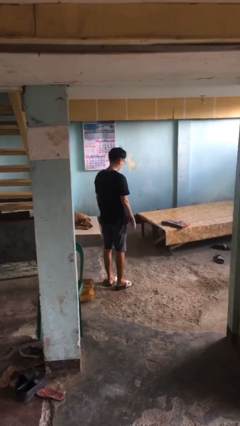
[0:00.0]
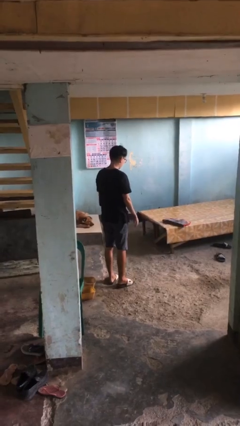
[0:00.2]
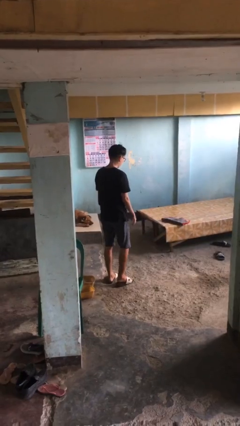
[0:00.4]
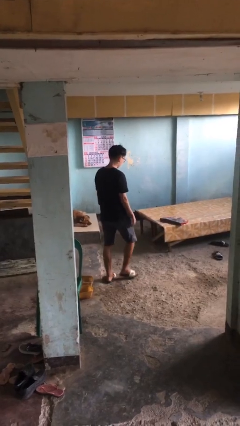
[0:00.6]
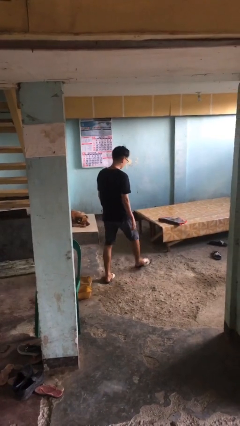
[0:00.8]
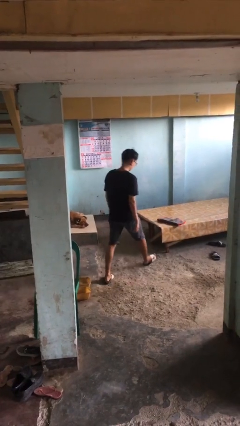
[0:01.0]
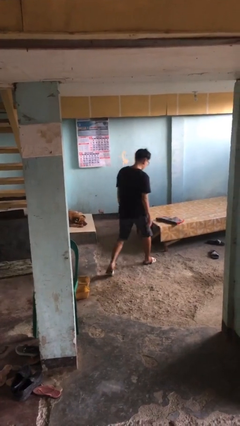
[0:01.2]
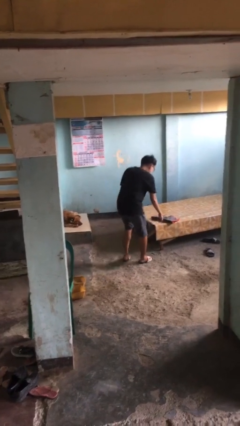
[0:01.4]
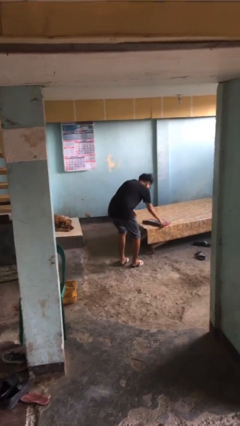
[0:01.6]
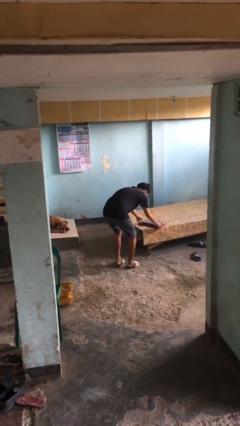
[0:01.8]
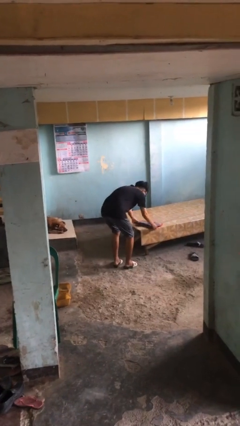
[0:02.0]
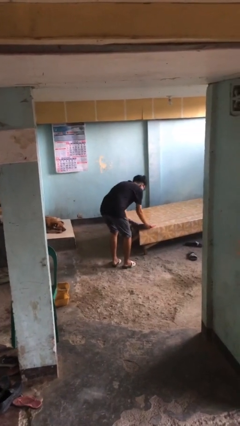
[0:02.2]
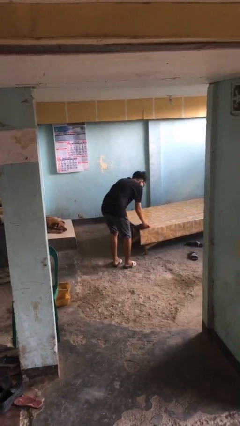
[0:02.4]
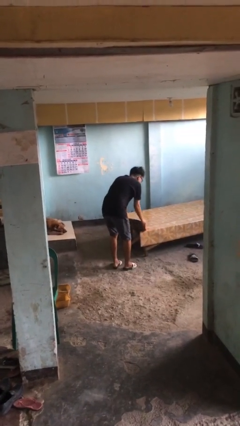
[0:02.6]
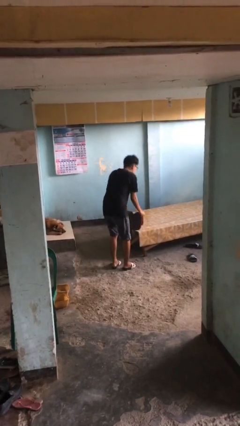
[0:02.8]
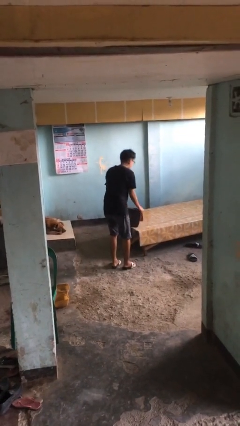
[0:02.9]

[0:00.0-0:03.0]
person picks up object from bed

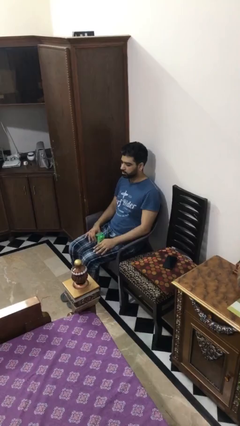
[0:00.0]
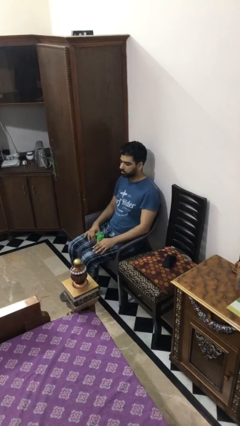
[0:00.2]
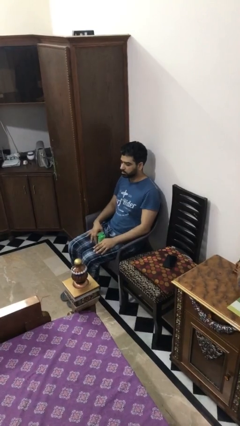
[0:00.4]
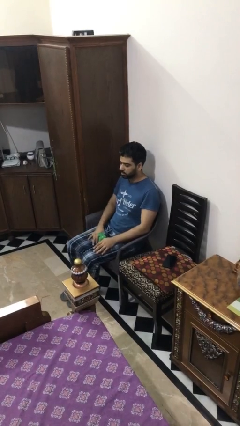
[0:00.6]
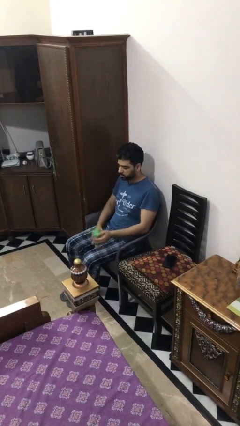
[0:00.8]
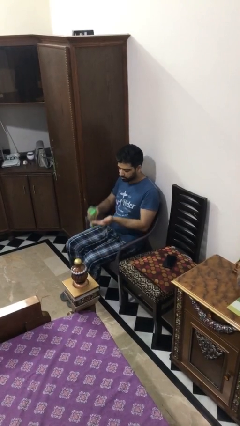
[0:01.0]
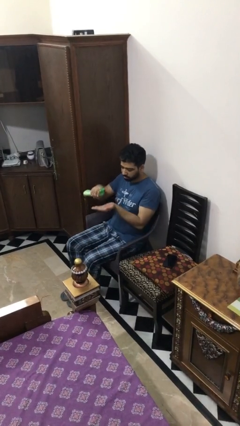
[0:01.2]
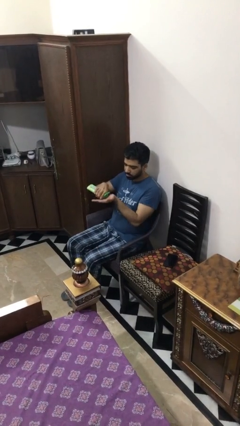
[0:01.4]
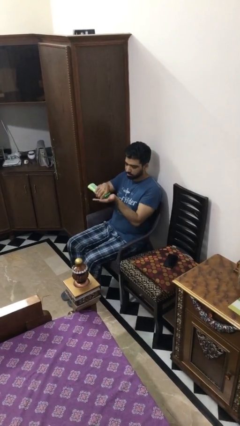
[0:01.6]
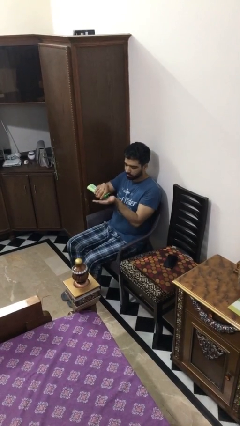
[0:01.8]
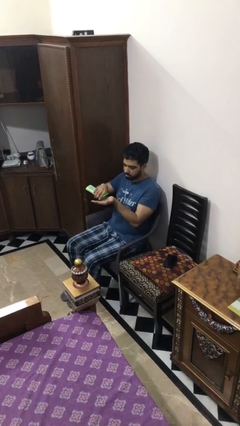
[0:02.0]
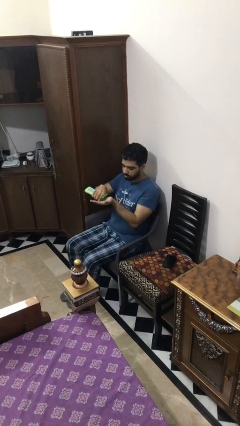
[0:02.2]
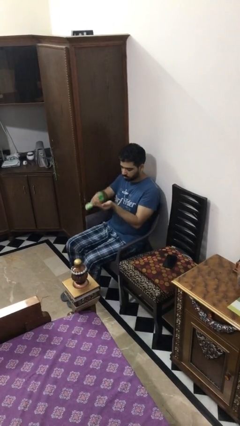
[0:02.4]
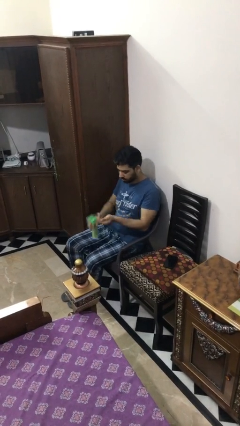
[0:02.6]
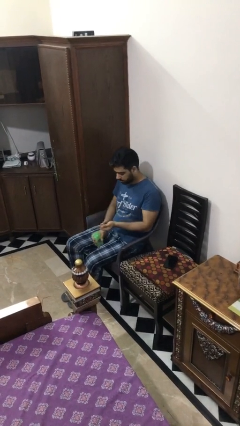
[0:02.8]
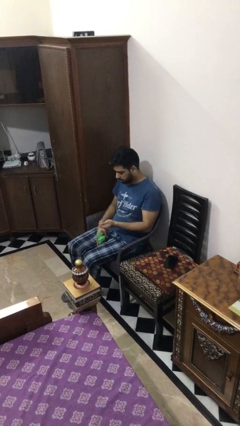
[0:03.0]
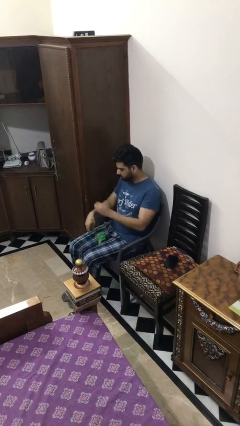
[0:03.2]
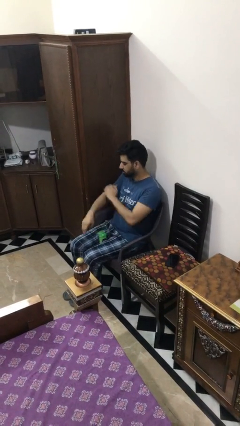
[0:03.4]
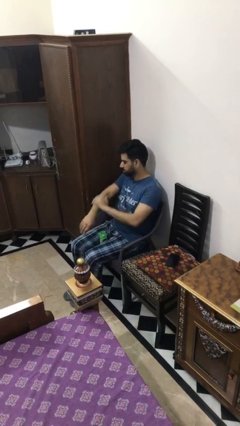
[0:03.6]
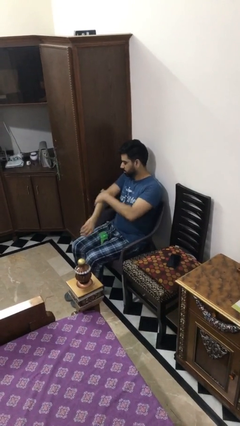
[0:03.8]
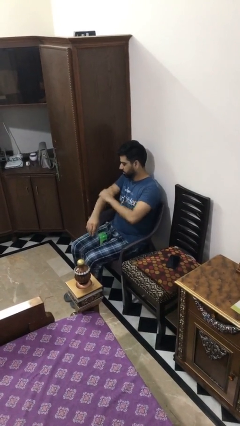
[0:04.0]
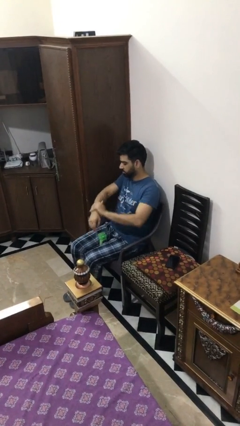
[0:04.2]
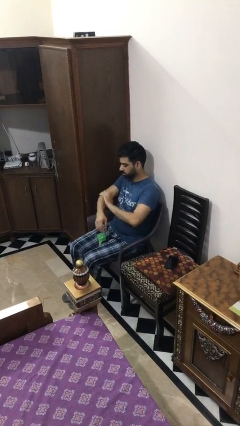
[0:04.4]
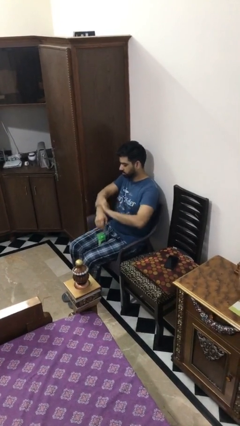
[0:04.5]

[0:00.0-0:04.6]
person applies sunscreen

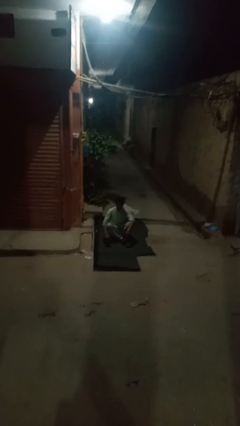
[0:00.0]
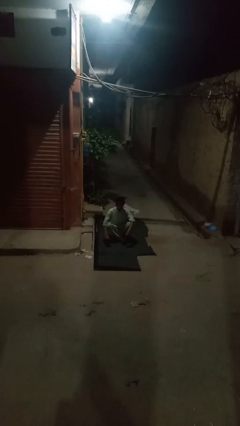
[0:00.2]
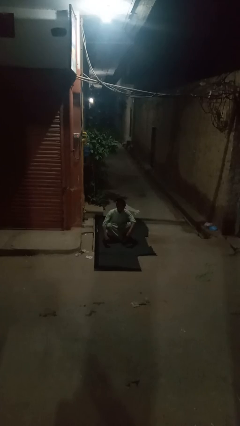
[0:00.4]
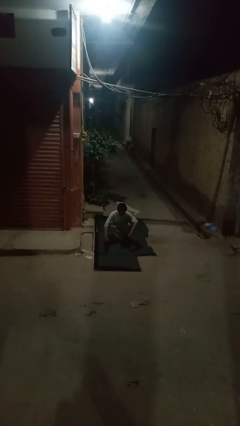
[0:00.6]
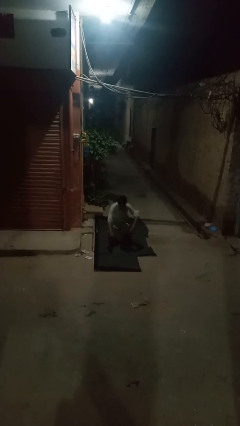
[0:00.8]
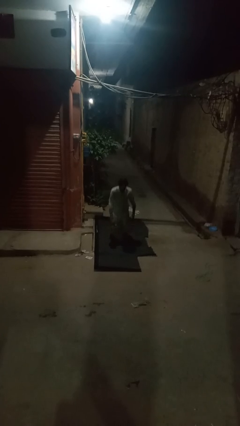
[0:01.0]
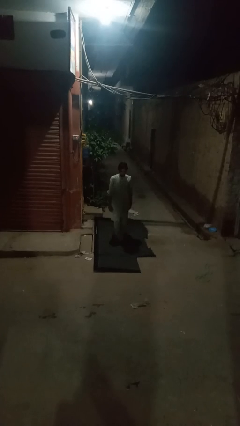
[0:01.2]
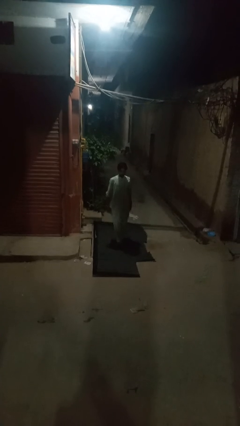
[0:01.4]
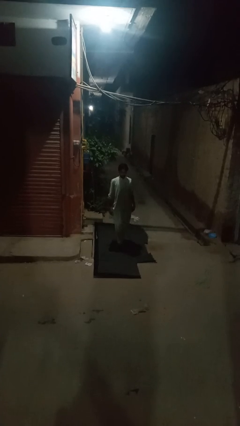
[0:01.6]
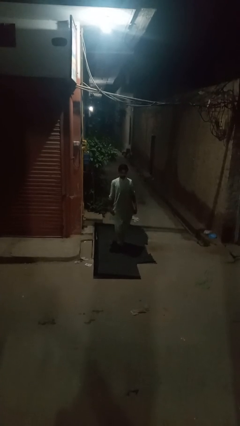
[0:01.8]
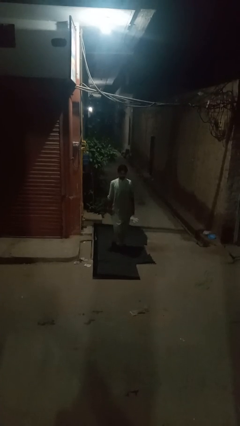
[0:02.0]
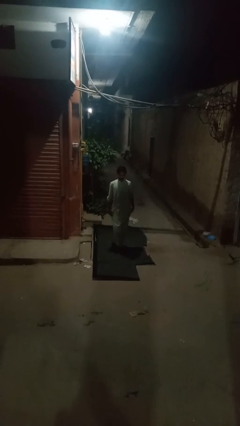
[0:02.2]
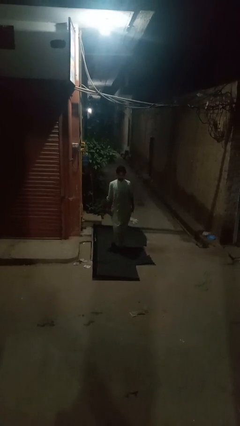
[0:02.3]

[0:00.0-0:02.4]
person stands up from floor

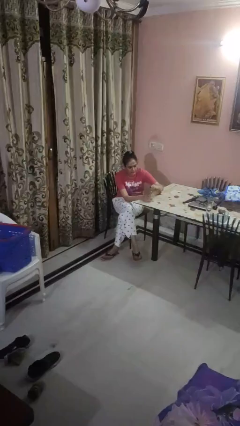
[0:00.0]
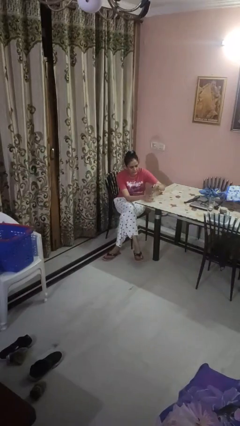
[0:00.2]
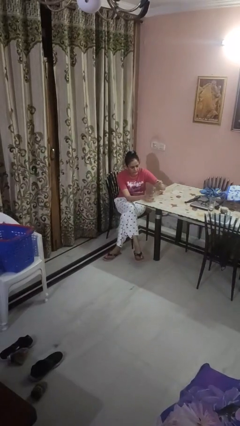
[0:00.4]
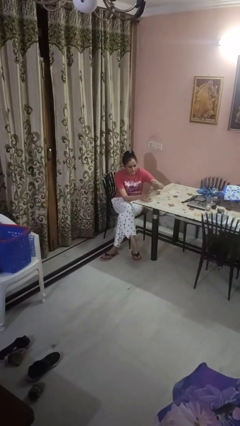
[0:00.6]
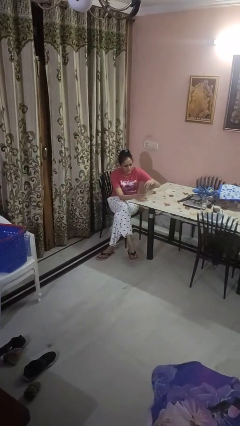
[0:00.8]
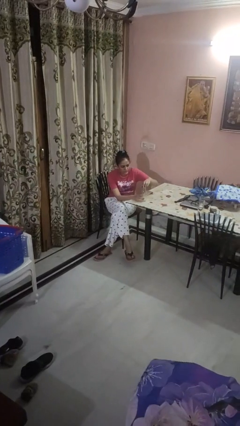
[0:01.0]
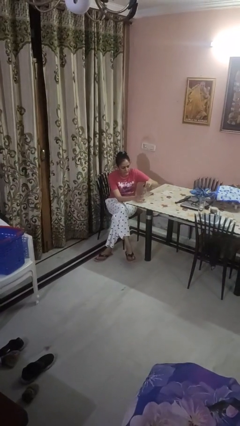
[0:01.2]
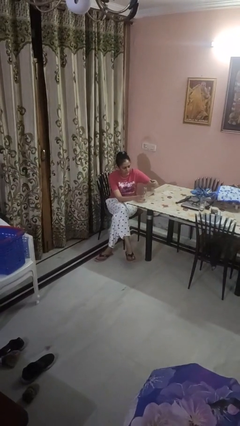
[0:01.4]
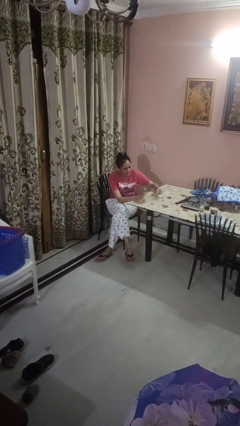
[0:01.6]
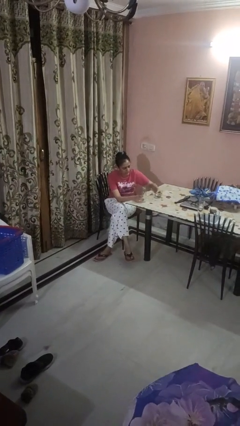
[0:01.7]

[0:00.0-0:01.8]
person unscrews lid from bottle

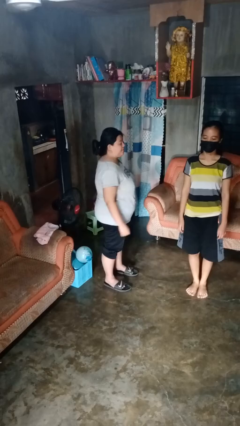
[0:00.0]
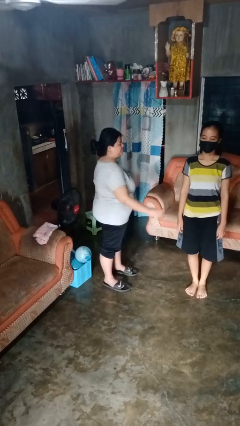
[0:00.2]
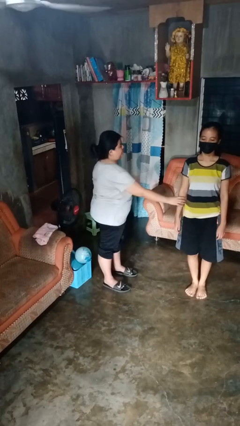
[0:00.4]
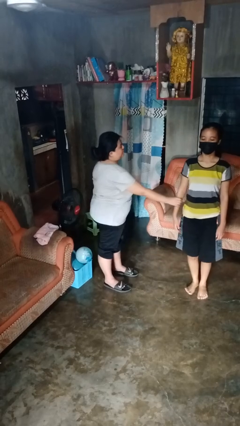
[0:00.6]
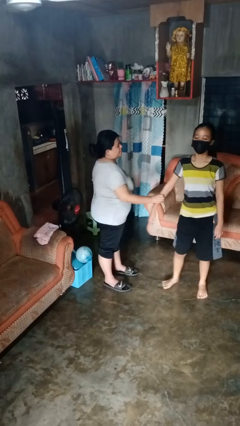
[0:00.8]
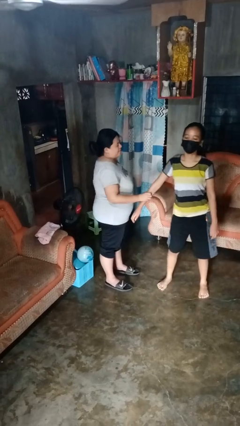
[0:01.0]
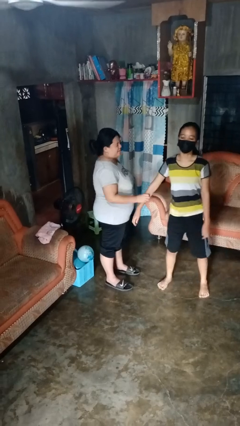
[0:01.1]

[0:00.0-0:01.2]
person grabs person by forearm

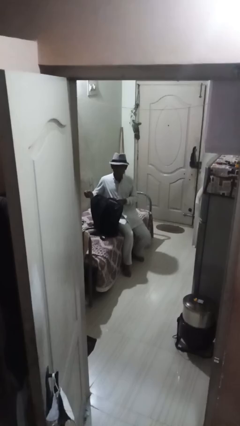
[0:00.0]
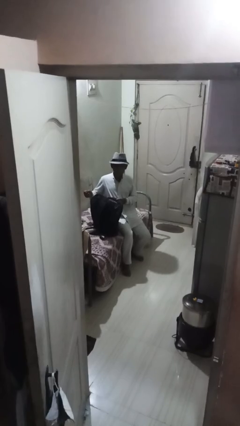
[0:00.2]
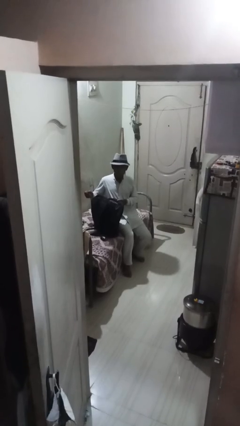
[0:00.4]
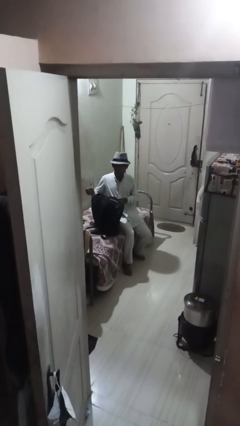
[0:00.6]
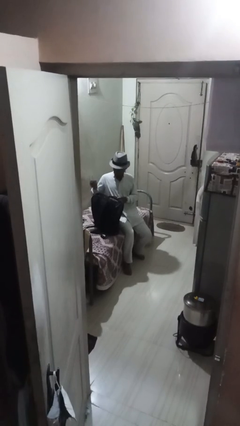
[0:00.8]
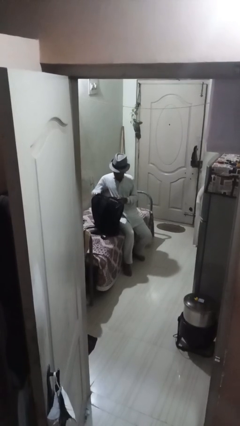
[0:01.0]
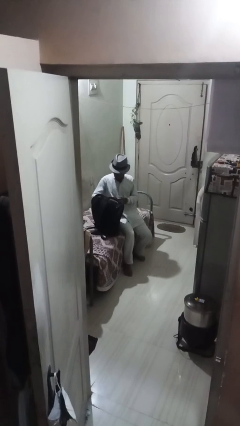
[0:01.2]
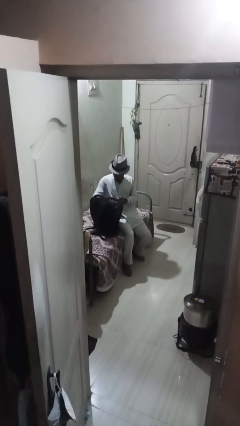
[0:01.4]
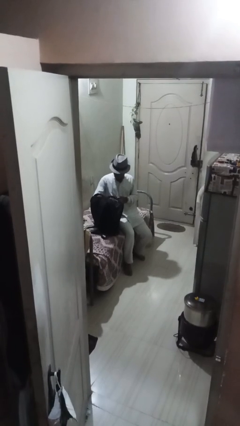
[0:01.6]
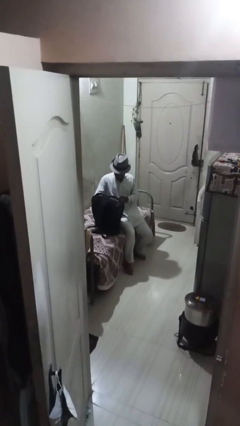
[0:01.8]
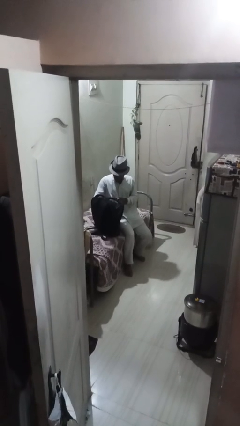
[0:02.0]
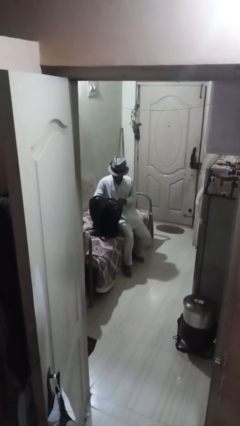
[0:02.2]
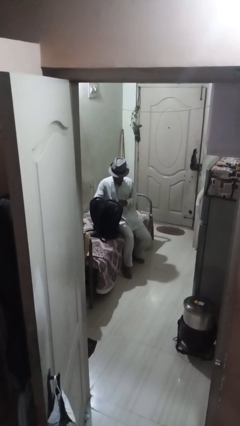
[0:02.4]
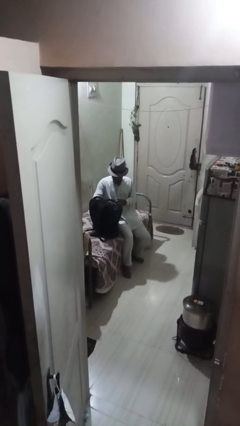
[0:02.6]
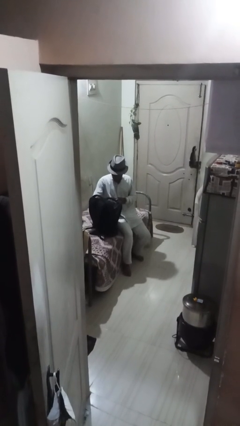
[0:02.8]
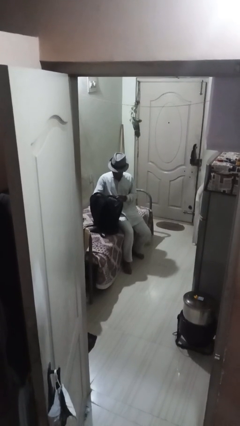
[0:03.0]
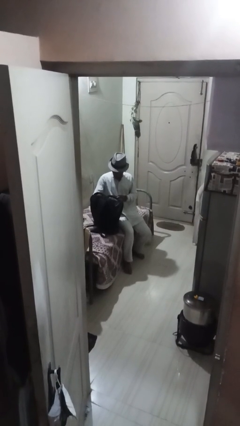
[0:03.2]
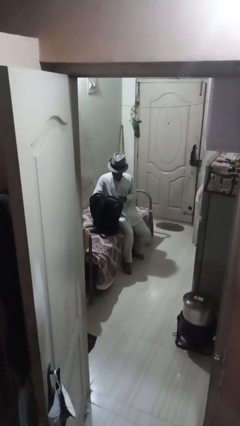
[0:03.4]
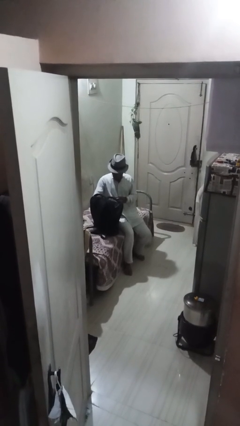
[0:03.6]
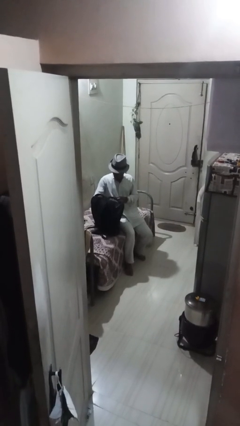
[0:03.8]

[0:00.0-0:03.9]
person searches in backpack

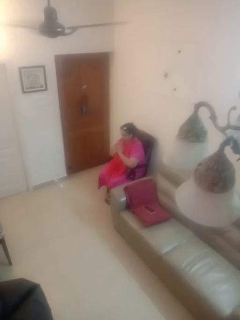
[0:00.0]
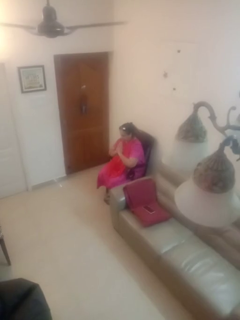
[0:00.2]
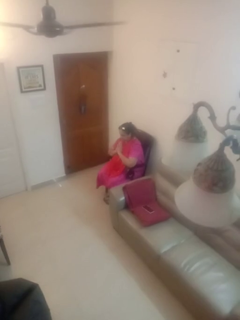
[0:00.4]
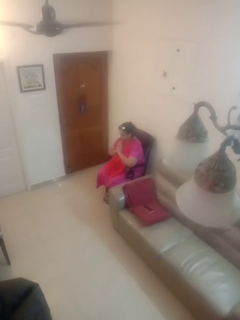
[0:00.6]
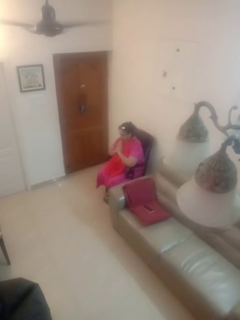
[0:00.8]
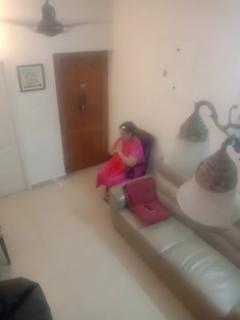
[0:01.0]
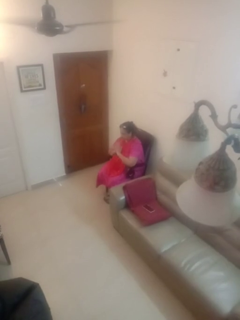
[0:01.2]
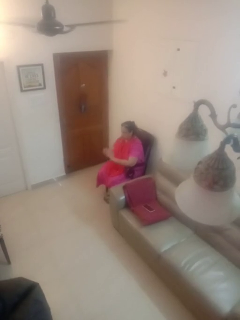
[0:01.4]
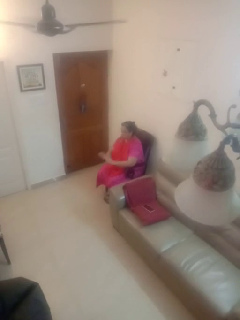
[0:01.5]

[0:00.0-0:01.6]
person prays
